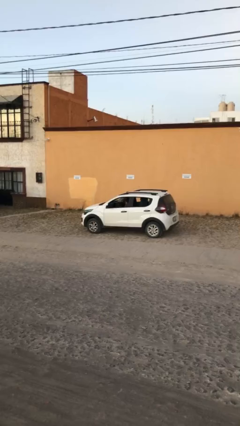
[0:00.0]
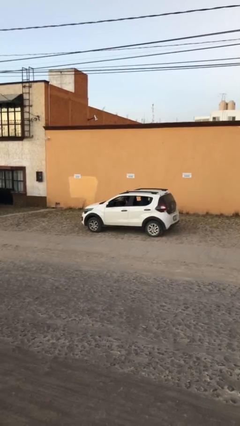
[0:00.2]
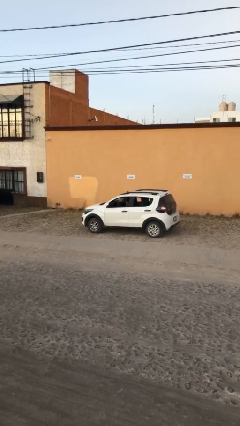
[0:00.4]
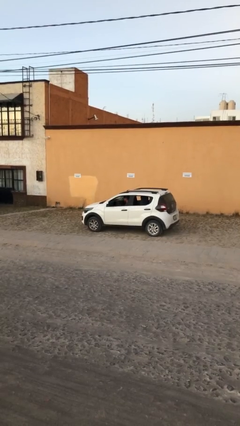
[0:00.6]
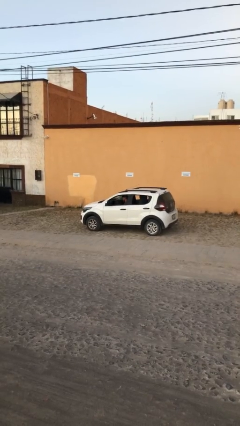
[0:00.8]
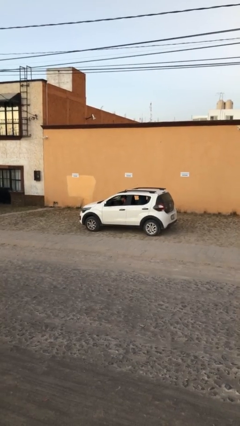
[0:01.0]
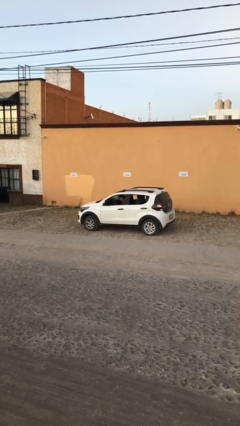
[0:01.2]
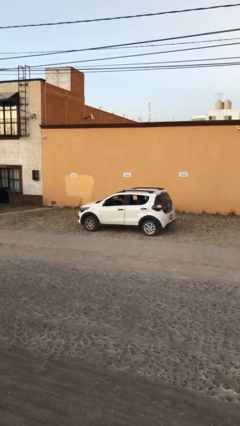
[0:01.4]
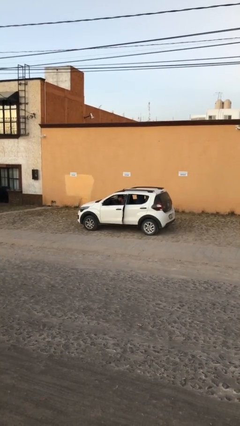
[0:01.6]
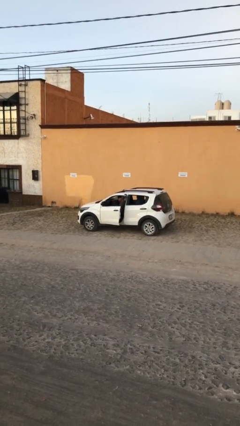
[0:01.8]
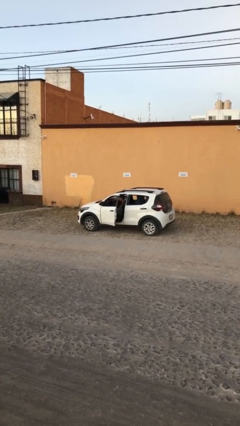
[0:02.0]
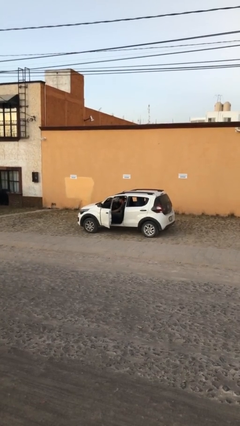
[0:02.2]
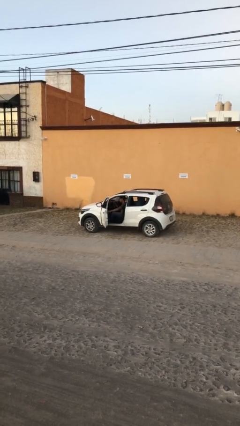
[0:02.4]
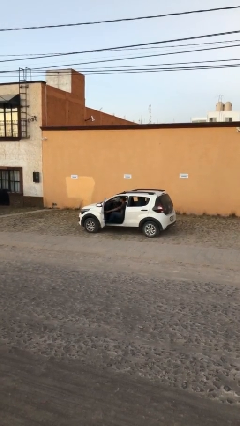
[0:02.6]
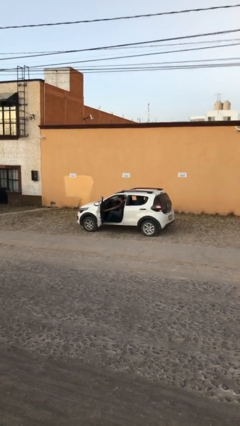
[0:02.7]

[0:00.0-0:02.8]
person opens car door

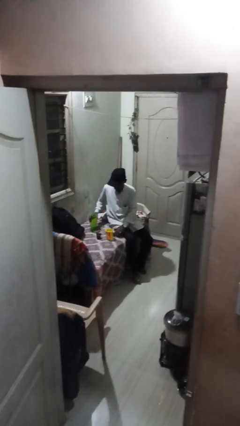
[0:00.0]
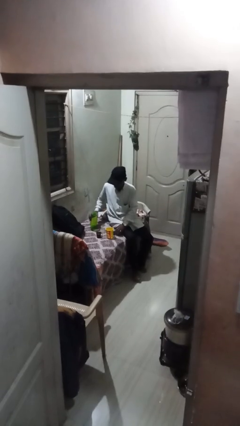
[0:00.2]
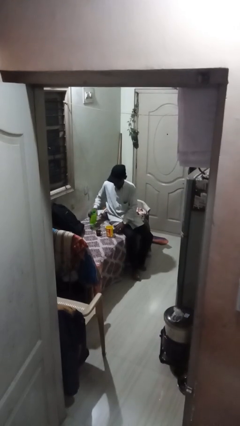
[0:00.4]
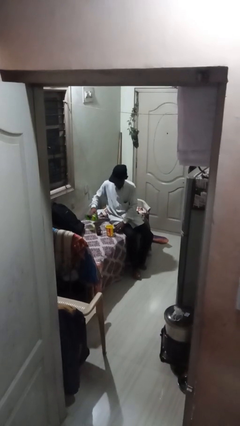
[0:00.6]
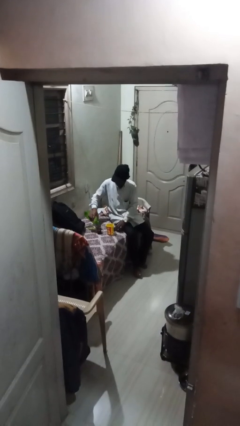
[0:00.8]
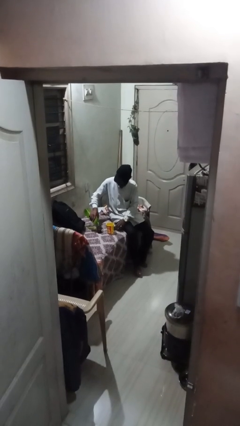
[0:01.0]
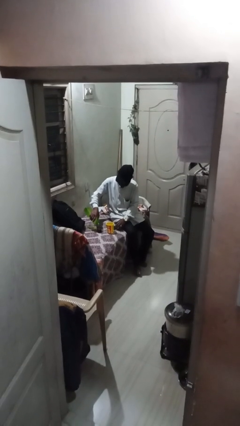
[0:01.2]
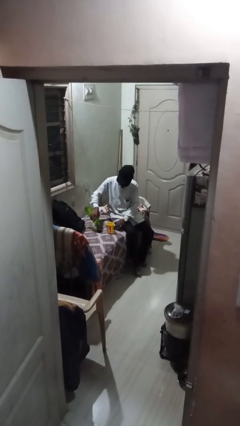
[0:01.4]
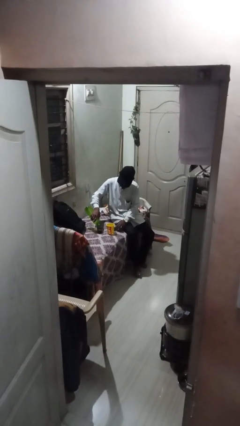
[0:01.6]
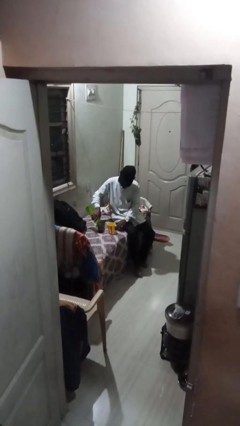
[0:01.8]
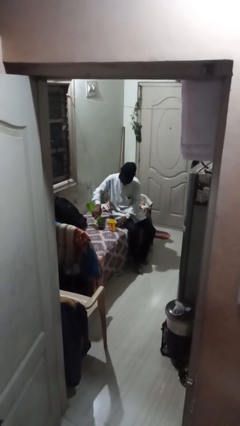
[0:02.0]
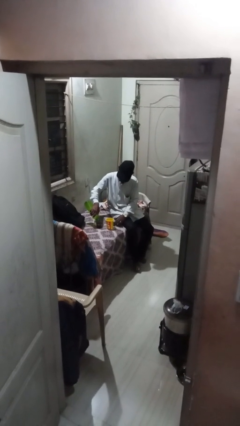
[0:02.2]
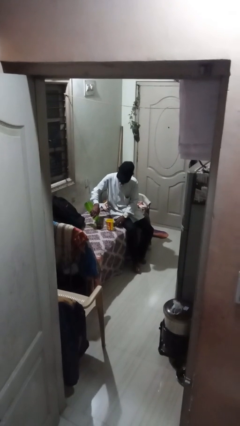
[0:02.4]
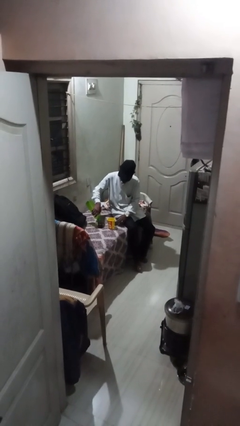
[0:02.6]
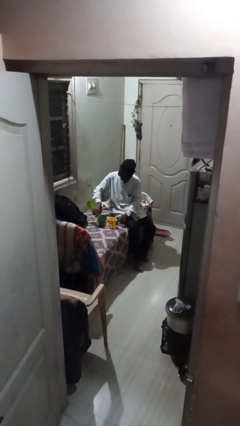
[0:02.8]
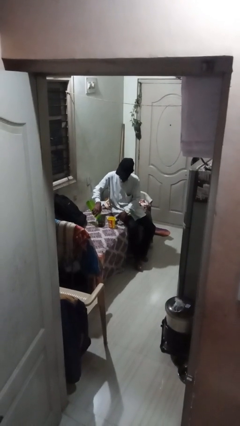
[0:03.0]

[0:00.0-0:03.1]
person pours liquid into cup

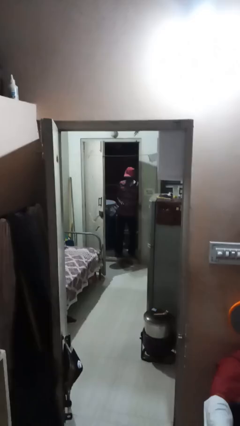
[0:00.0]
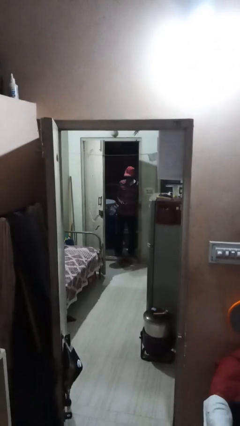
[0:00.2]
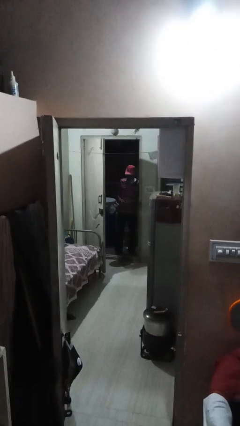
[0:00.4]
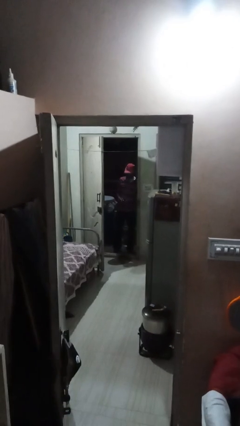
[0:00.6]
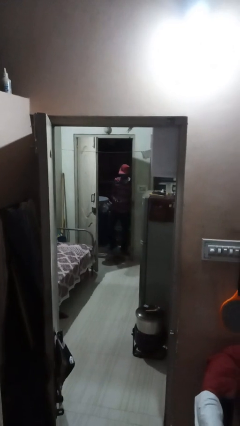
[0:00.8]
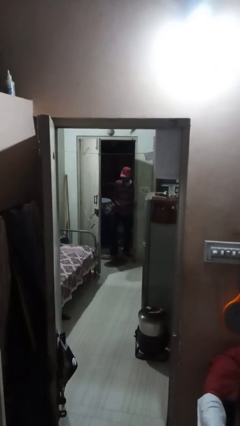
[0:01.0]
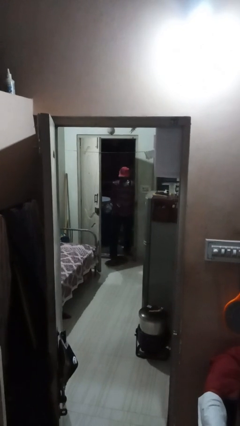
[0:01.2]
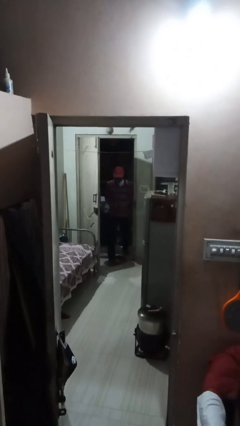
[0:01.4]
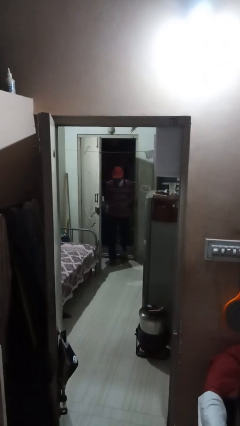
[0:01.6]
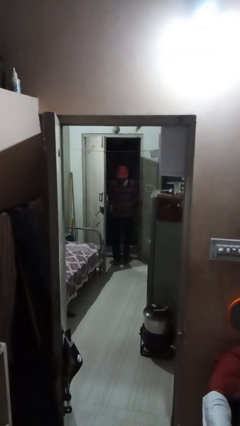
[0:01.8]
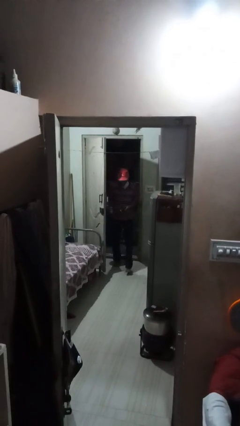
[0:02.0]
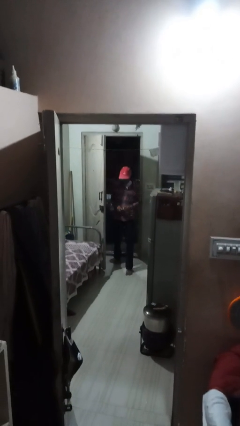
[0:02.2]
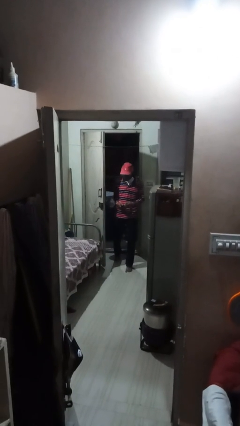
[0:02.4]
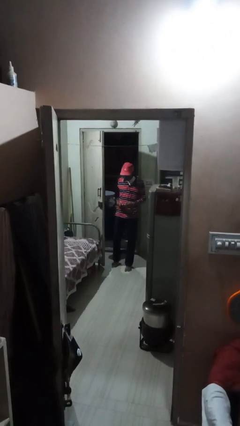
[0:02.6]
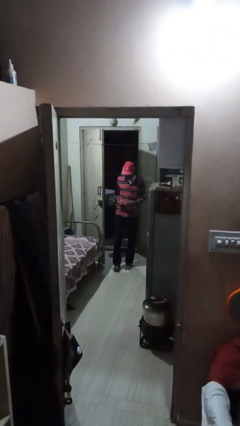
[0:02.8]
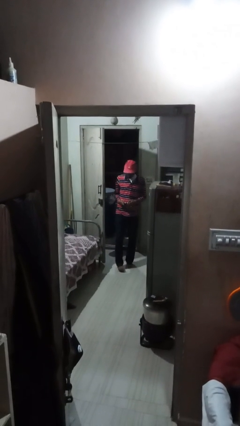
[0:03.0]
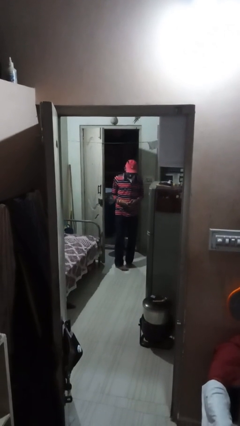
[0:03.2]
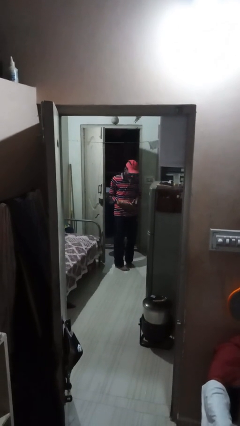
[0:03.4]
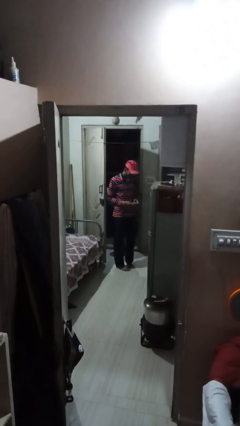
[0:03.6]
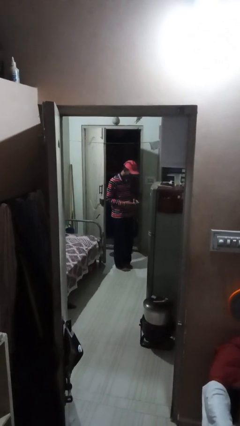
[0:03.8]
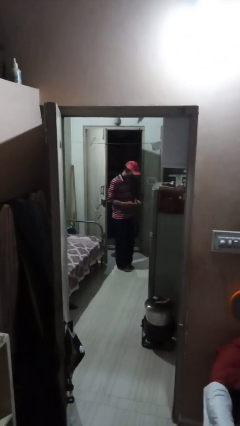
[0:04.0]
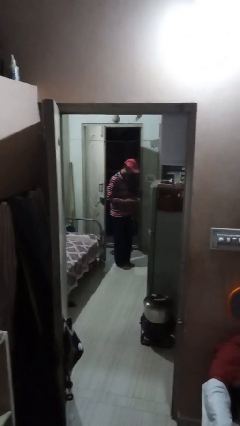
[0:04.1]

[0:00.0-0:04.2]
person enters scene through structure

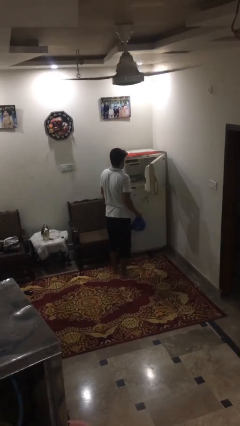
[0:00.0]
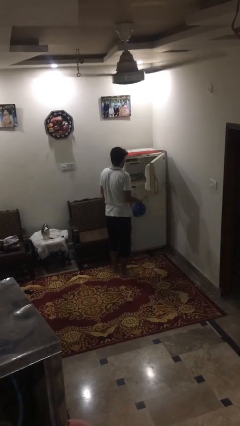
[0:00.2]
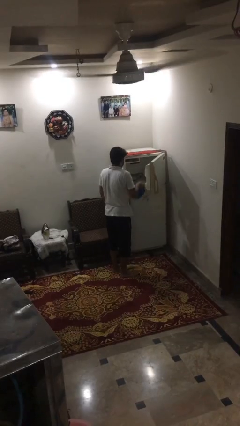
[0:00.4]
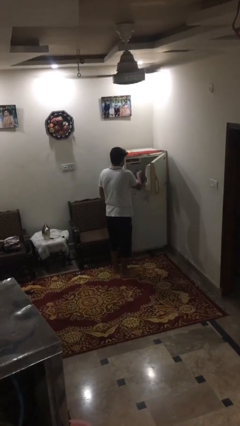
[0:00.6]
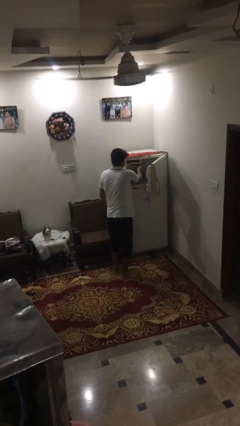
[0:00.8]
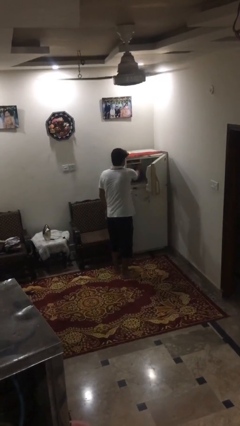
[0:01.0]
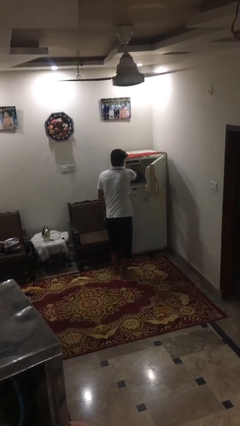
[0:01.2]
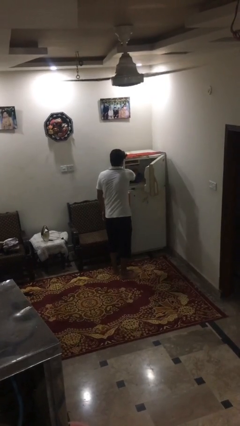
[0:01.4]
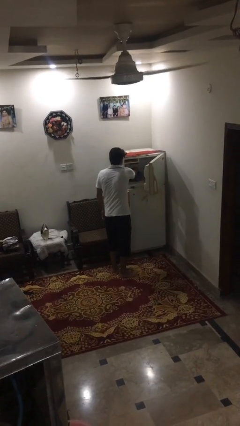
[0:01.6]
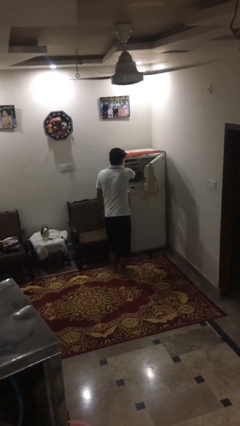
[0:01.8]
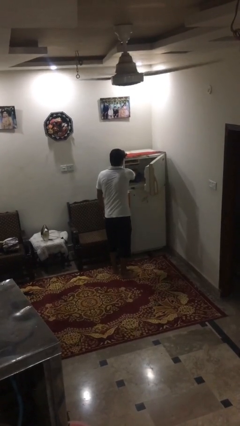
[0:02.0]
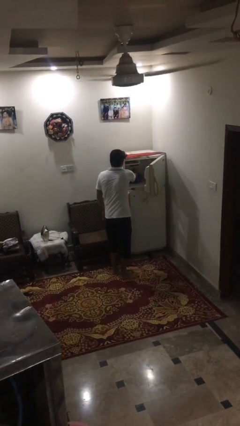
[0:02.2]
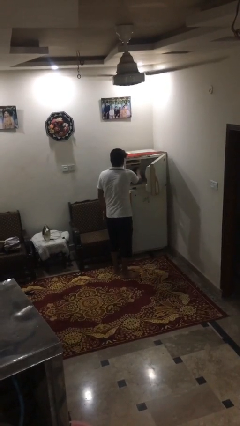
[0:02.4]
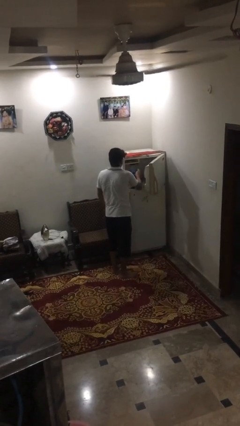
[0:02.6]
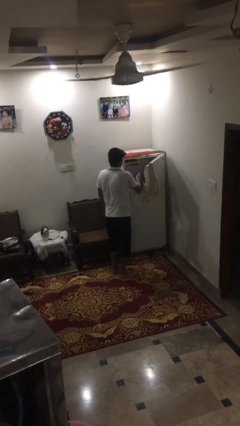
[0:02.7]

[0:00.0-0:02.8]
person loads groceries into refrigerator

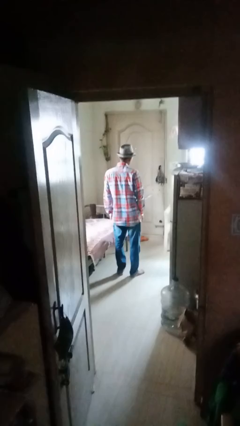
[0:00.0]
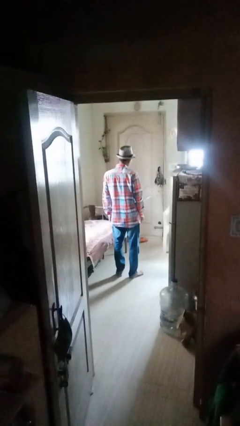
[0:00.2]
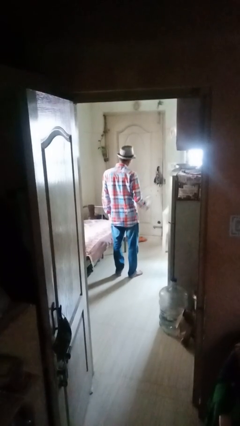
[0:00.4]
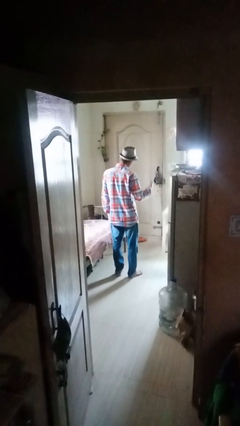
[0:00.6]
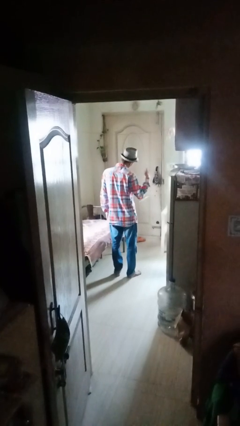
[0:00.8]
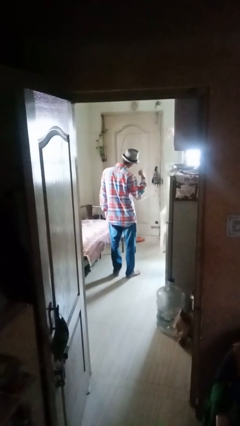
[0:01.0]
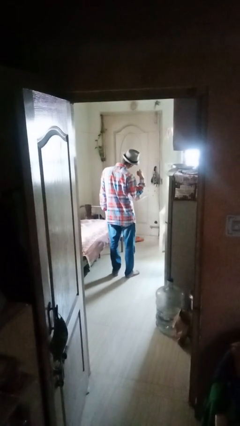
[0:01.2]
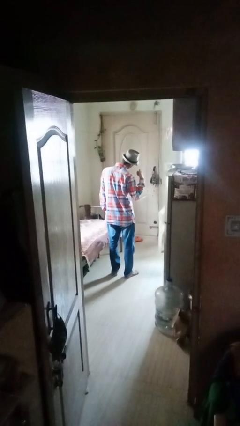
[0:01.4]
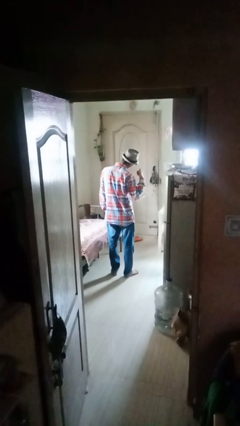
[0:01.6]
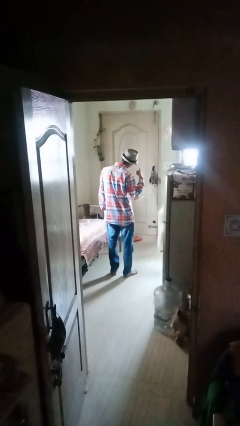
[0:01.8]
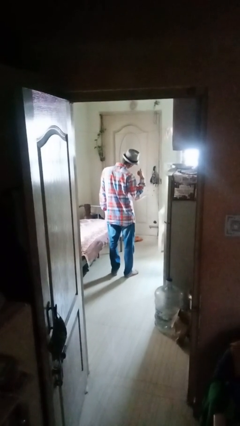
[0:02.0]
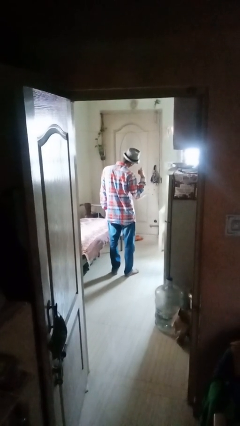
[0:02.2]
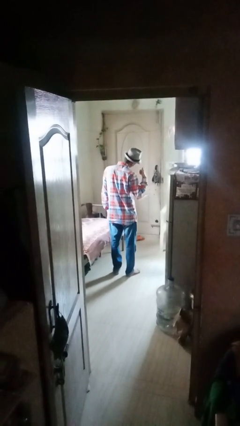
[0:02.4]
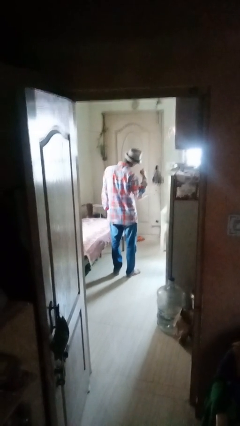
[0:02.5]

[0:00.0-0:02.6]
person gestures call me

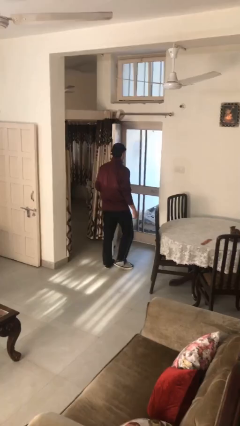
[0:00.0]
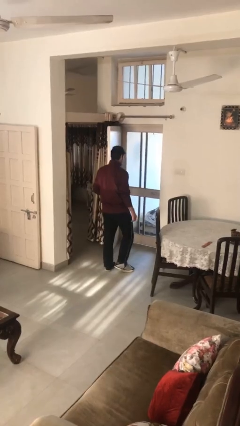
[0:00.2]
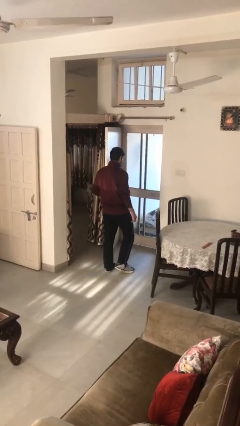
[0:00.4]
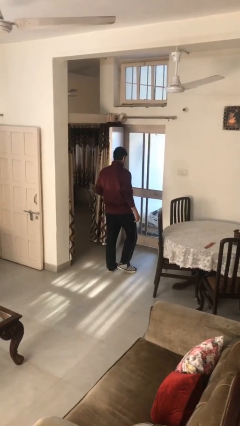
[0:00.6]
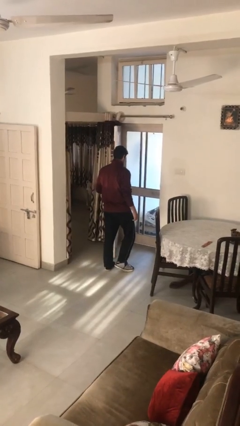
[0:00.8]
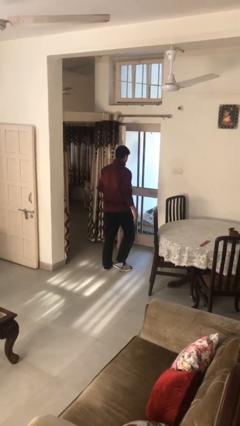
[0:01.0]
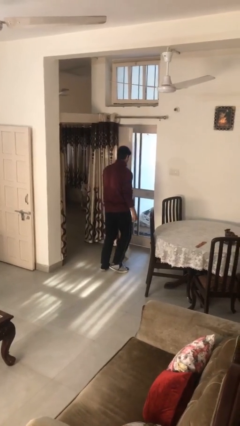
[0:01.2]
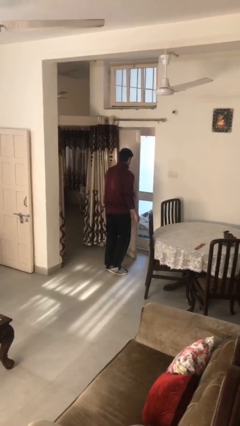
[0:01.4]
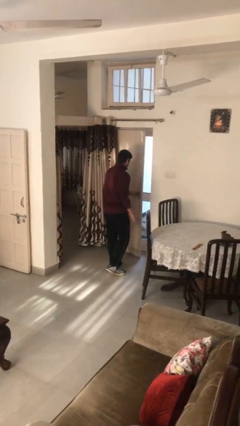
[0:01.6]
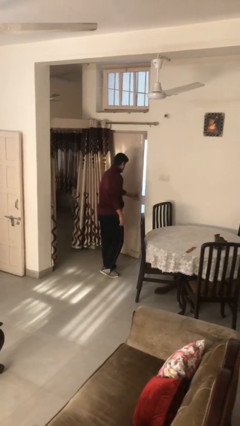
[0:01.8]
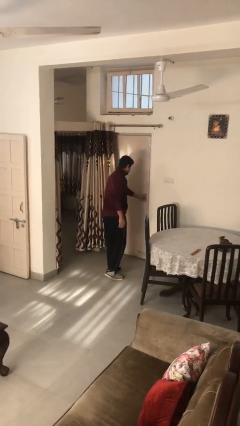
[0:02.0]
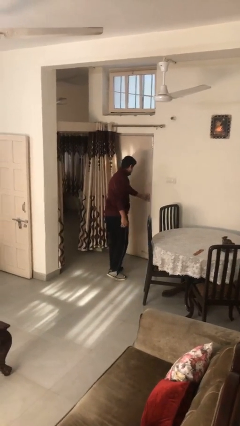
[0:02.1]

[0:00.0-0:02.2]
person closes facility door
